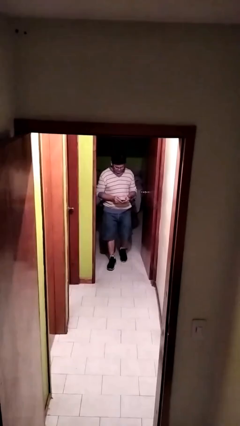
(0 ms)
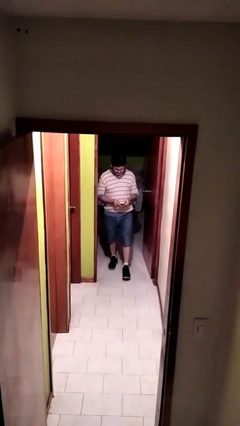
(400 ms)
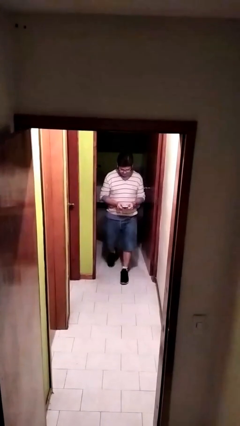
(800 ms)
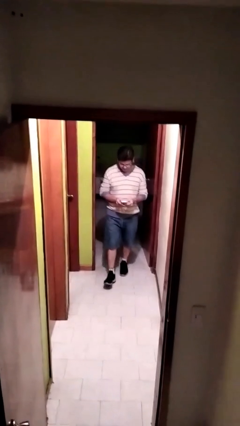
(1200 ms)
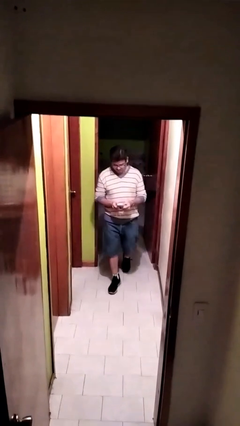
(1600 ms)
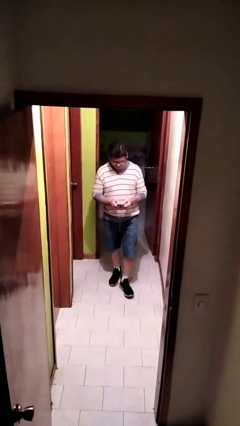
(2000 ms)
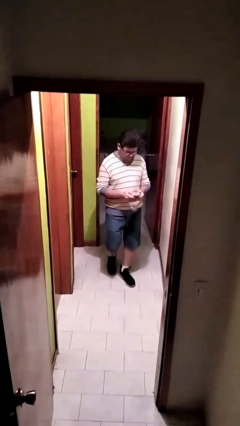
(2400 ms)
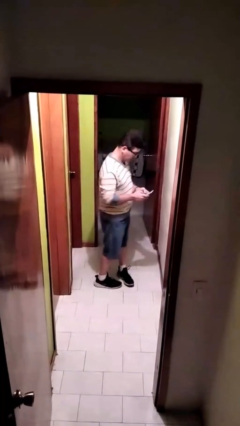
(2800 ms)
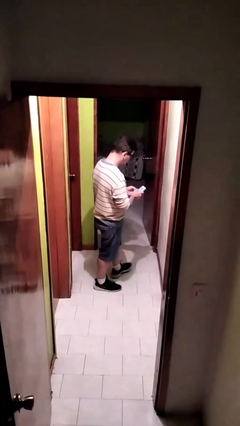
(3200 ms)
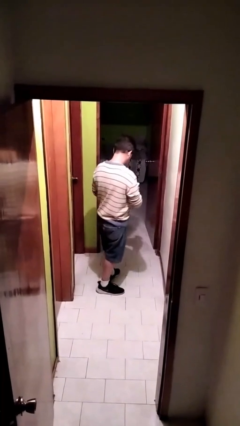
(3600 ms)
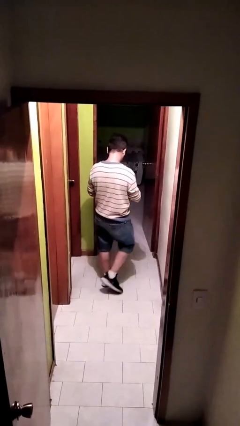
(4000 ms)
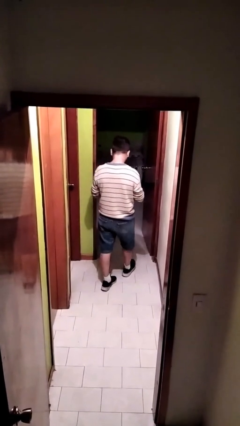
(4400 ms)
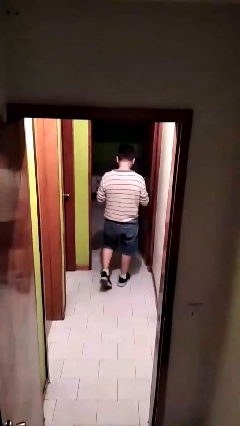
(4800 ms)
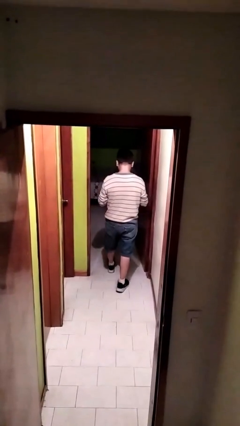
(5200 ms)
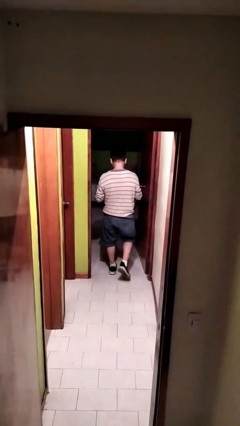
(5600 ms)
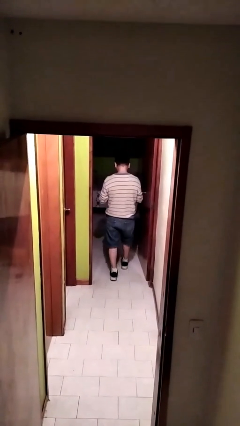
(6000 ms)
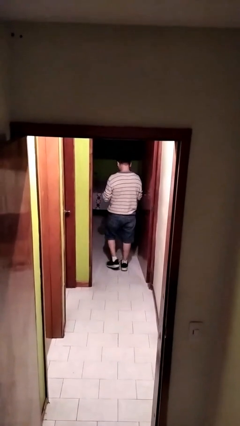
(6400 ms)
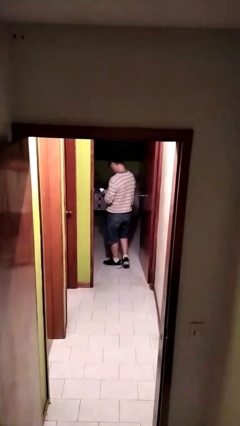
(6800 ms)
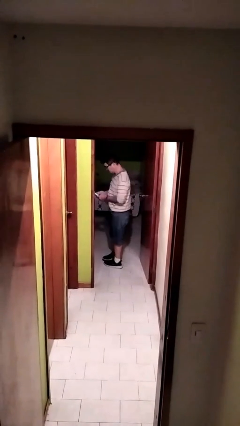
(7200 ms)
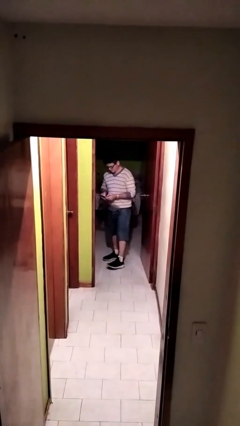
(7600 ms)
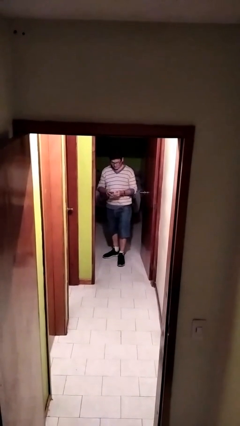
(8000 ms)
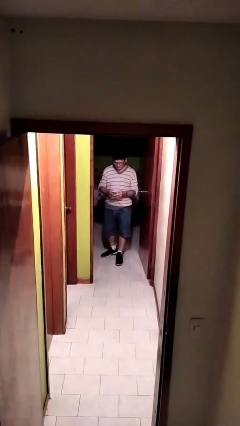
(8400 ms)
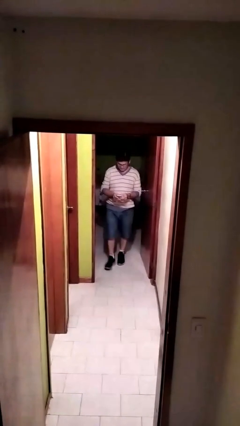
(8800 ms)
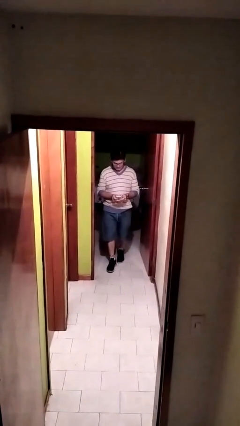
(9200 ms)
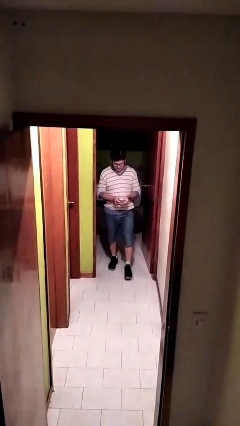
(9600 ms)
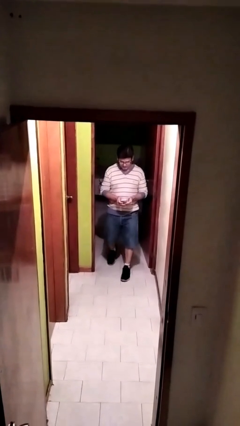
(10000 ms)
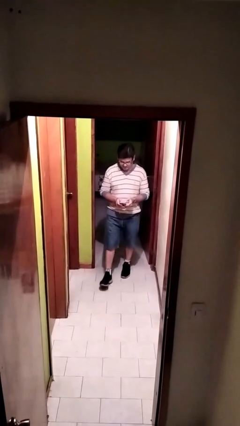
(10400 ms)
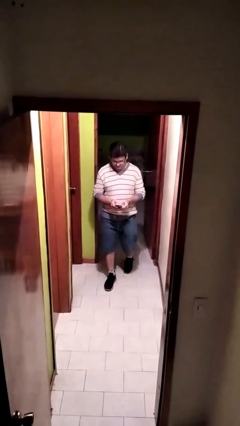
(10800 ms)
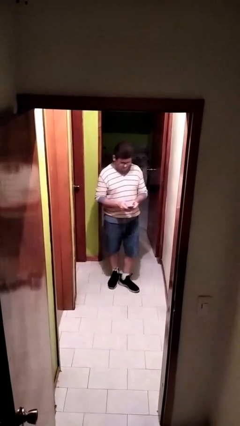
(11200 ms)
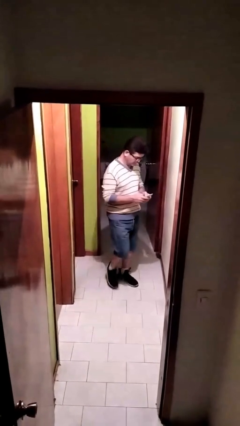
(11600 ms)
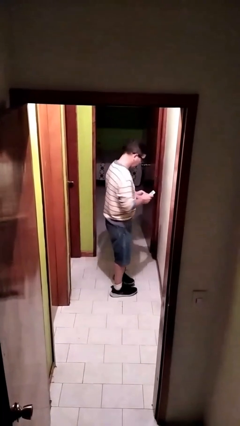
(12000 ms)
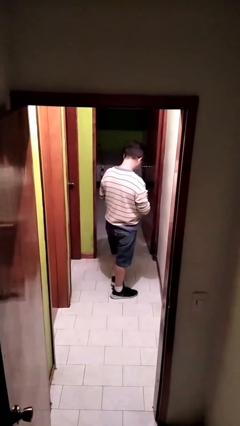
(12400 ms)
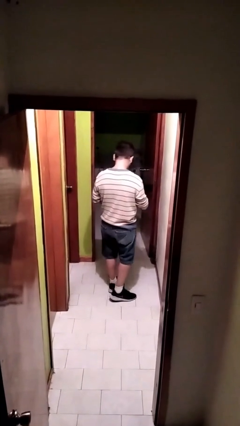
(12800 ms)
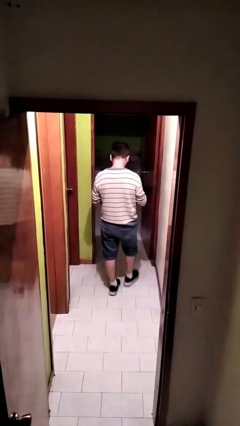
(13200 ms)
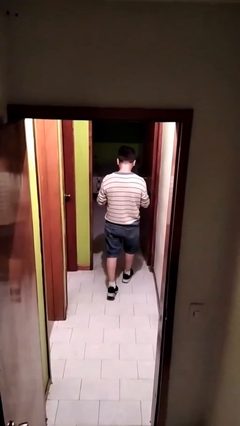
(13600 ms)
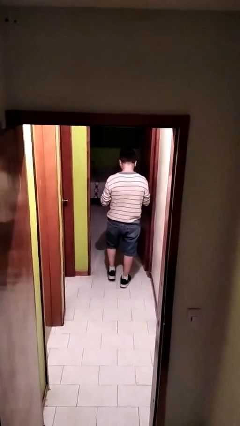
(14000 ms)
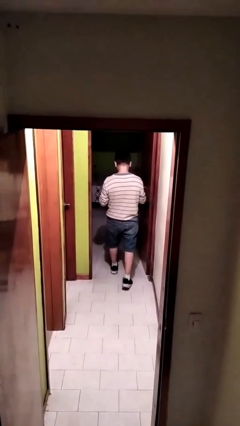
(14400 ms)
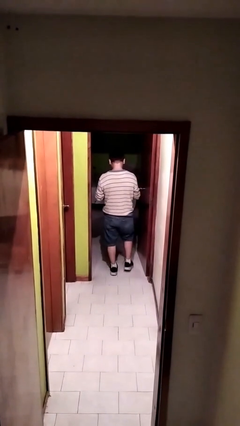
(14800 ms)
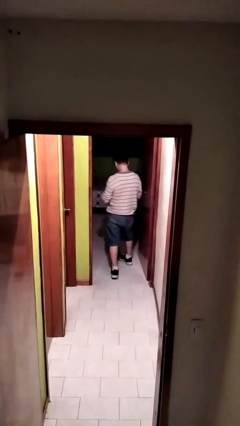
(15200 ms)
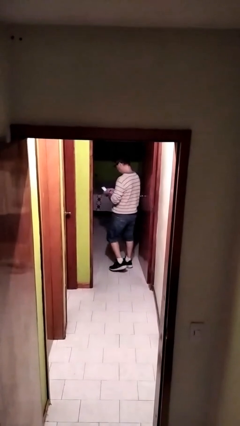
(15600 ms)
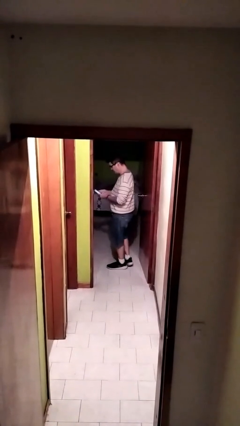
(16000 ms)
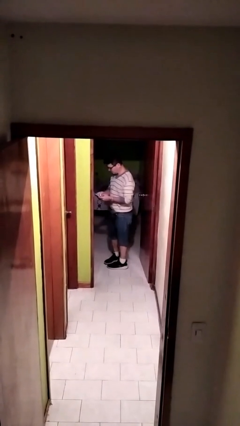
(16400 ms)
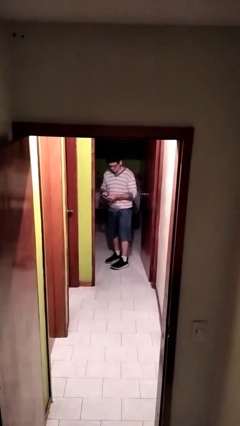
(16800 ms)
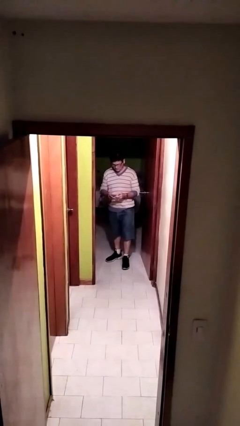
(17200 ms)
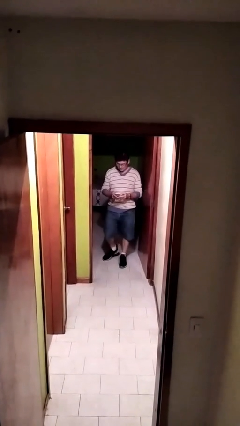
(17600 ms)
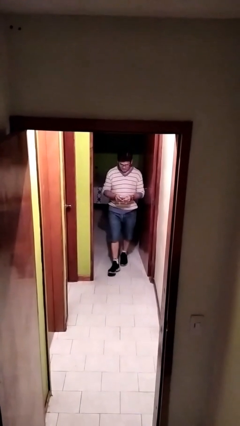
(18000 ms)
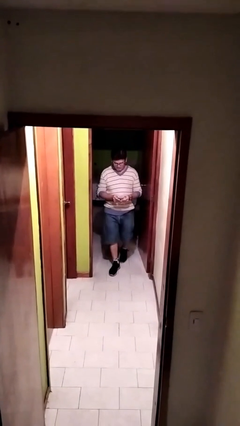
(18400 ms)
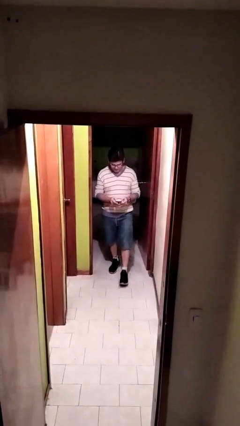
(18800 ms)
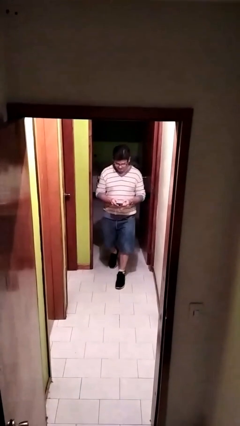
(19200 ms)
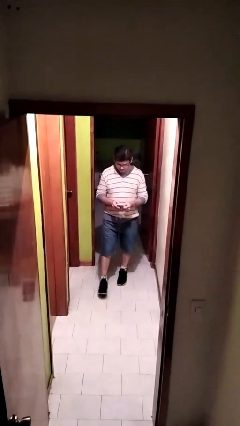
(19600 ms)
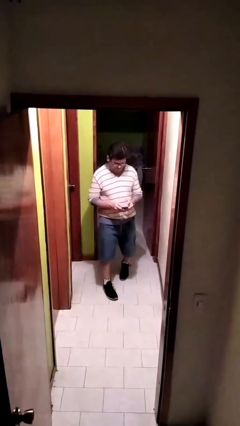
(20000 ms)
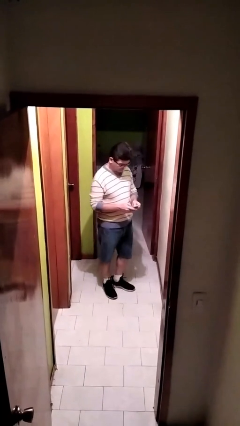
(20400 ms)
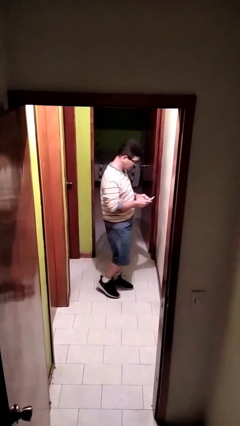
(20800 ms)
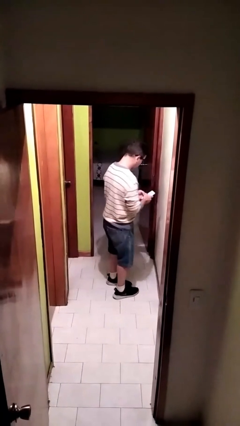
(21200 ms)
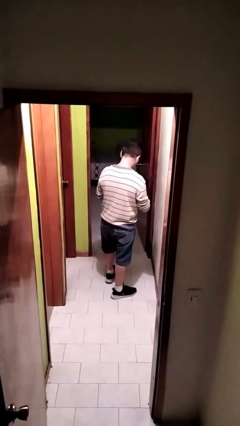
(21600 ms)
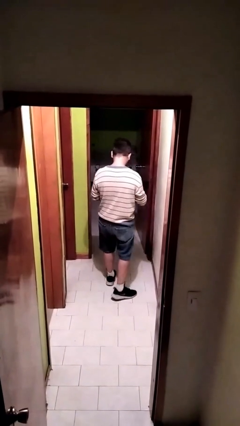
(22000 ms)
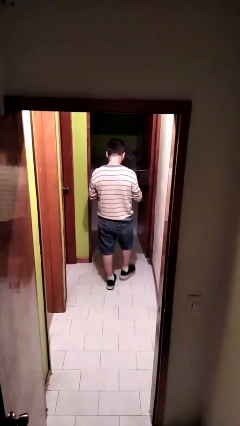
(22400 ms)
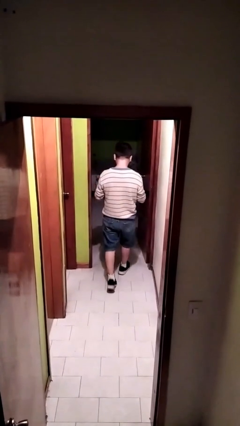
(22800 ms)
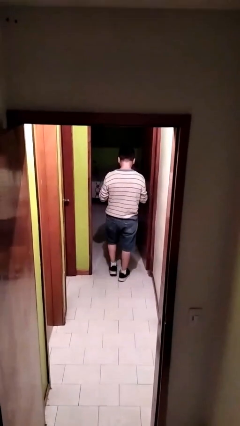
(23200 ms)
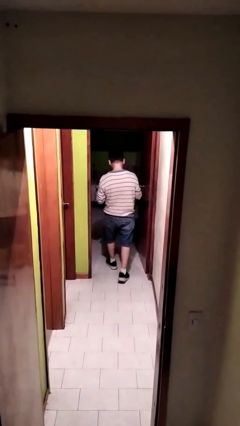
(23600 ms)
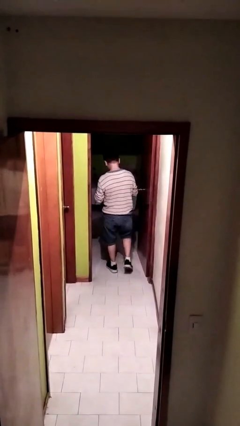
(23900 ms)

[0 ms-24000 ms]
person texts on phone

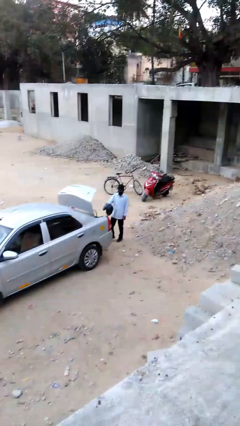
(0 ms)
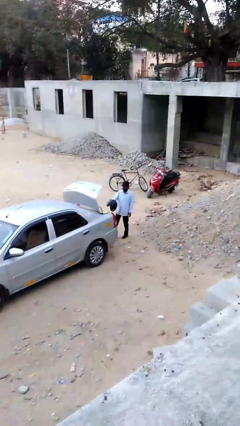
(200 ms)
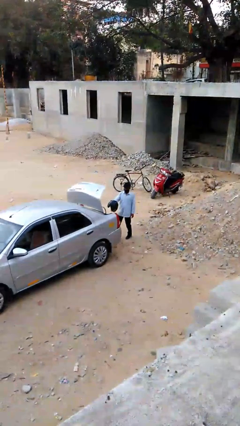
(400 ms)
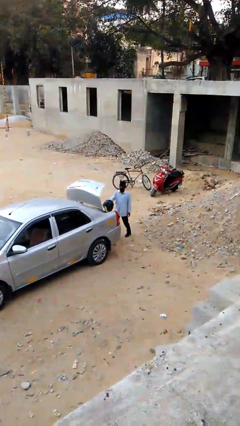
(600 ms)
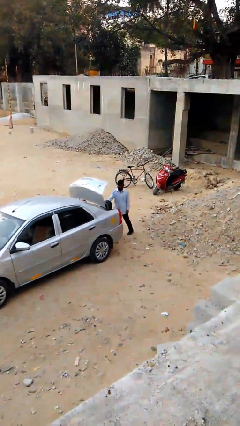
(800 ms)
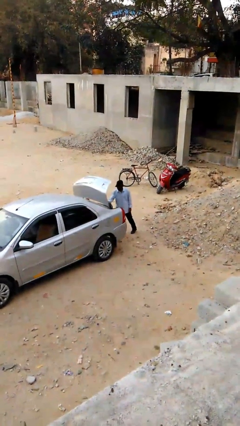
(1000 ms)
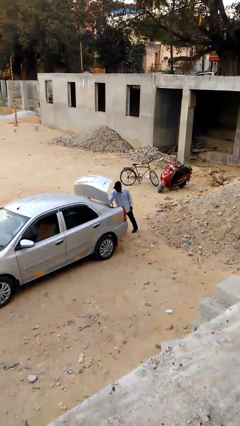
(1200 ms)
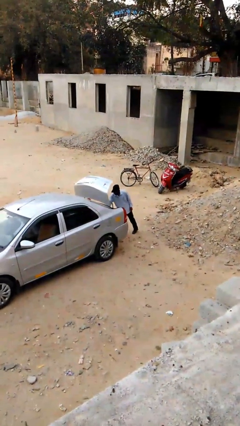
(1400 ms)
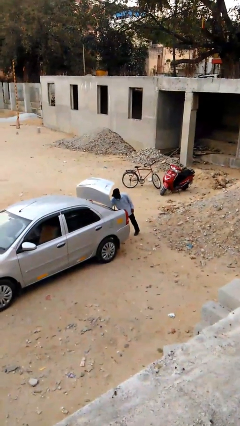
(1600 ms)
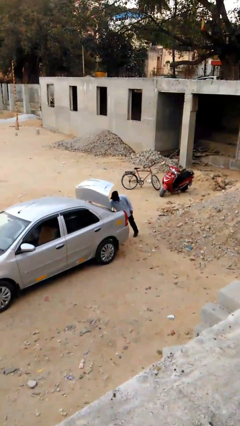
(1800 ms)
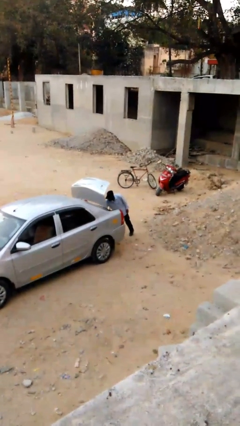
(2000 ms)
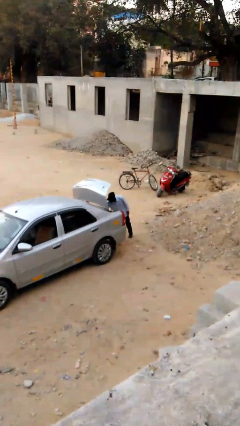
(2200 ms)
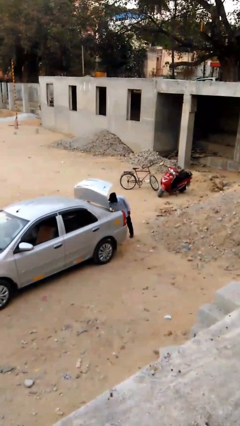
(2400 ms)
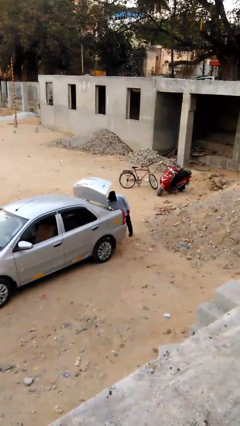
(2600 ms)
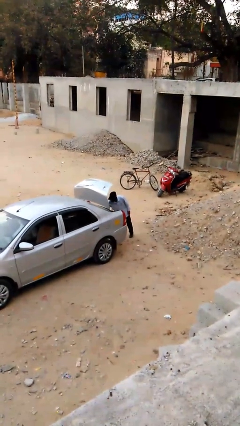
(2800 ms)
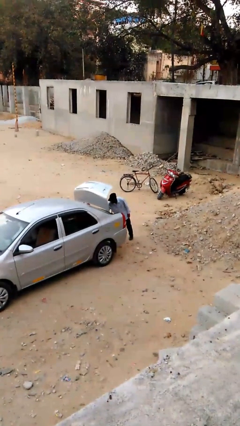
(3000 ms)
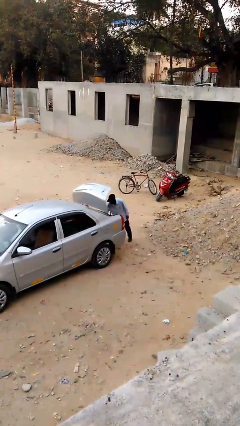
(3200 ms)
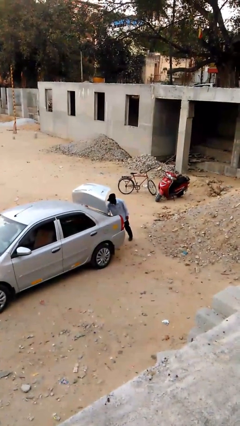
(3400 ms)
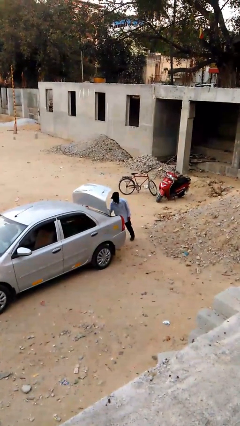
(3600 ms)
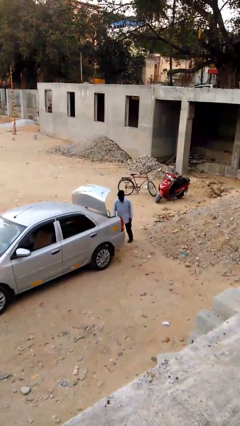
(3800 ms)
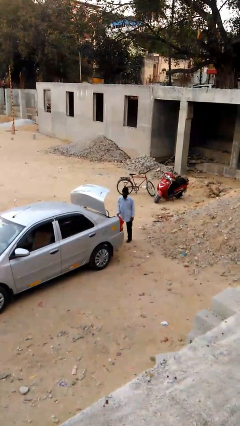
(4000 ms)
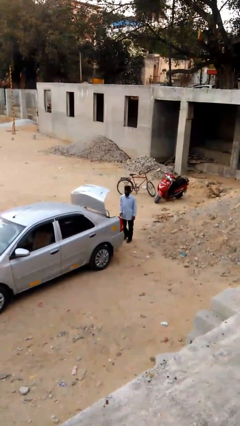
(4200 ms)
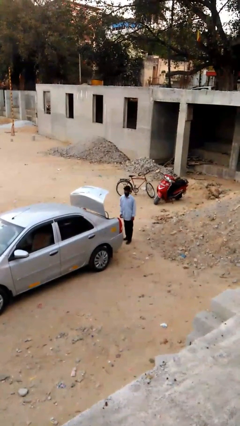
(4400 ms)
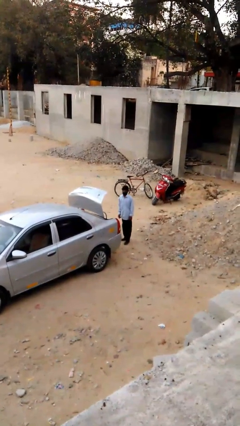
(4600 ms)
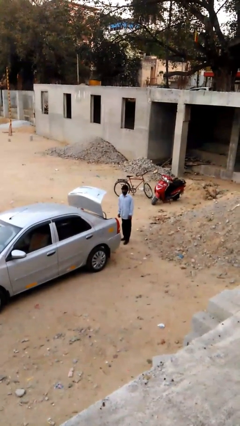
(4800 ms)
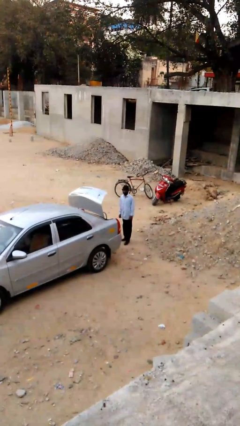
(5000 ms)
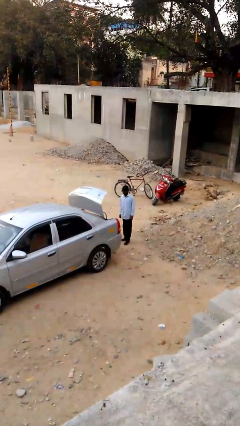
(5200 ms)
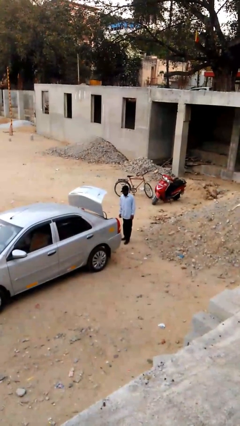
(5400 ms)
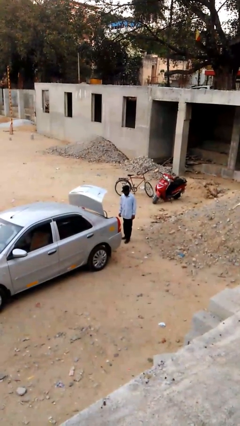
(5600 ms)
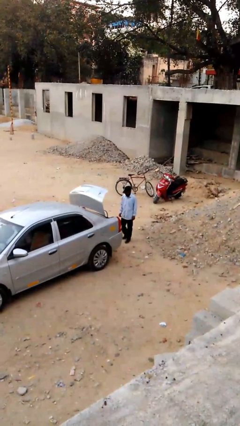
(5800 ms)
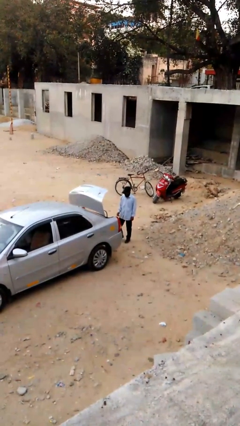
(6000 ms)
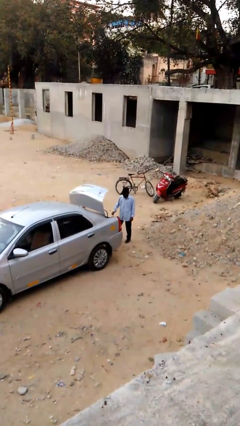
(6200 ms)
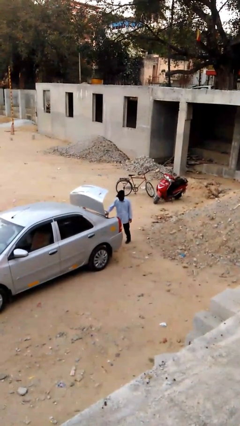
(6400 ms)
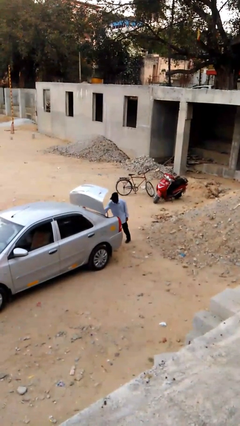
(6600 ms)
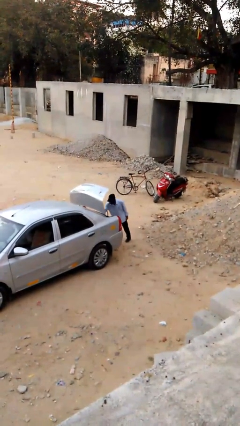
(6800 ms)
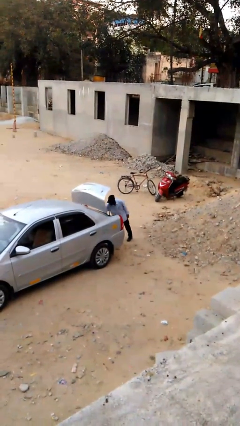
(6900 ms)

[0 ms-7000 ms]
person loads car
